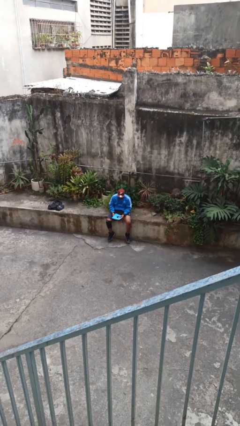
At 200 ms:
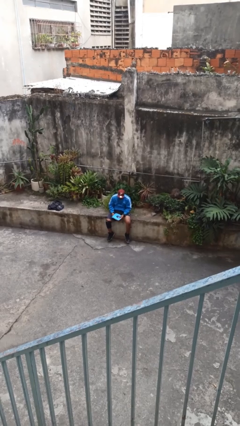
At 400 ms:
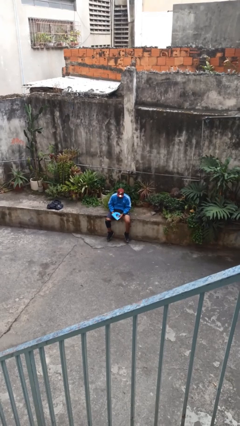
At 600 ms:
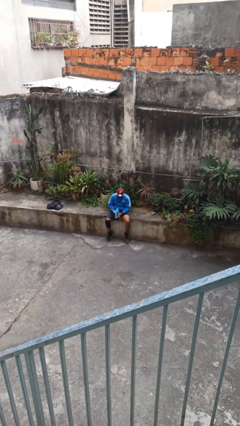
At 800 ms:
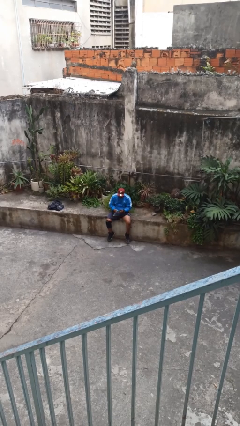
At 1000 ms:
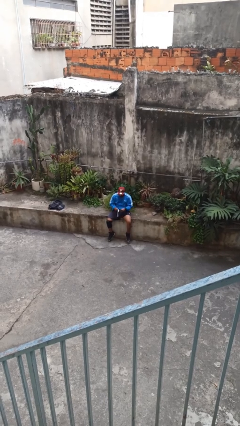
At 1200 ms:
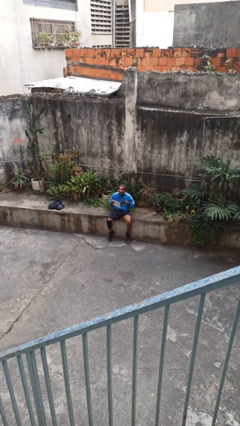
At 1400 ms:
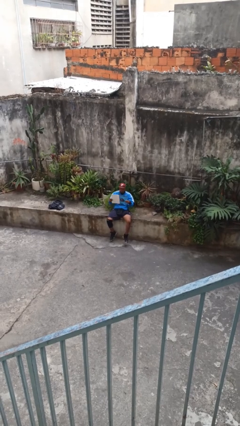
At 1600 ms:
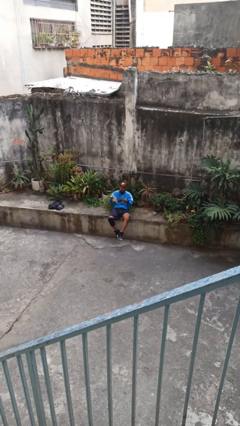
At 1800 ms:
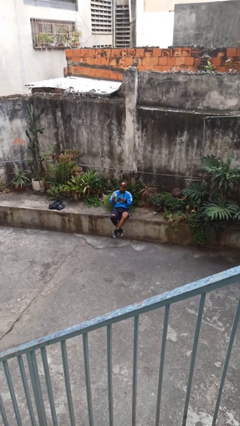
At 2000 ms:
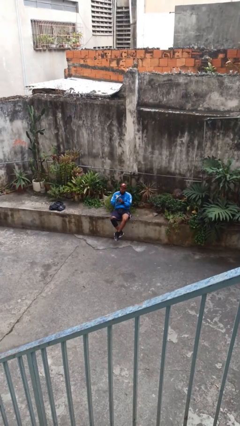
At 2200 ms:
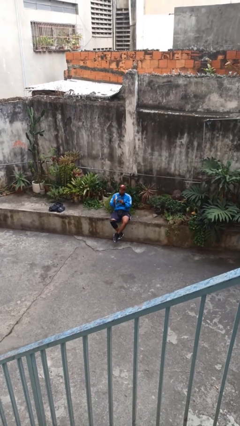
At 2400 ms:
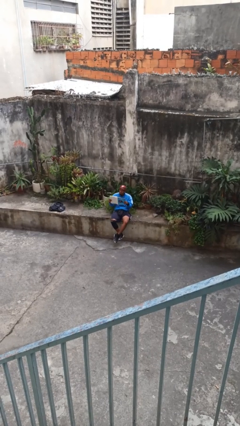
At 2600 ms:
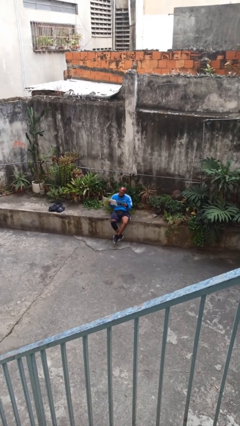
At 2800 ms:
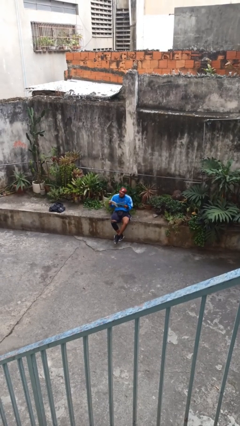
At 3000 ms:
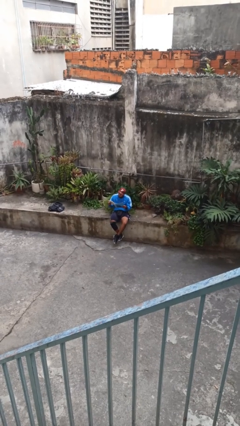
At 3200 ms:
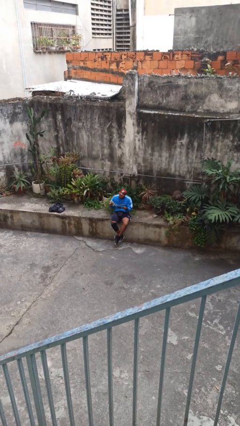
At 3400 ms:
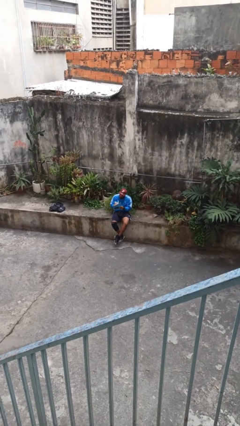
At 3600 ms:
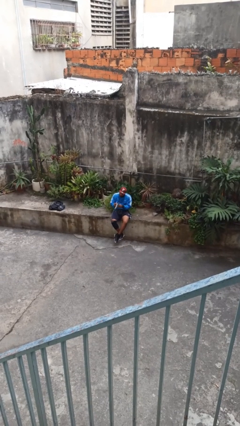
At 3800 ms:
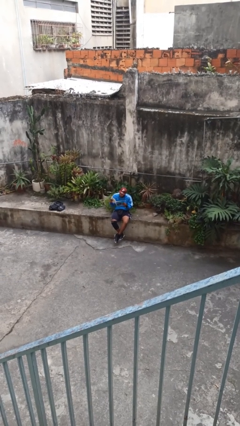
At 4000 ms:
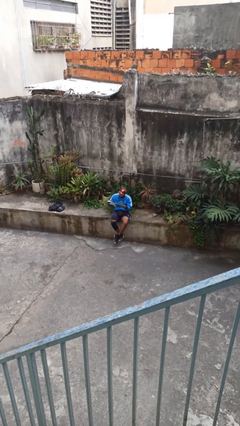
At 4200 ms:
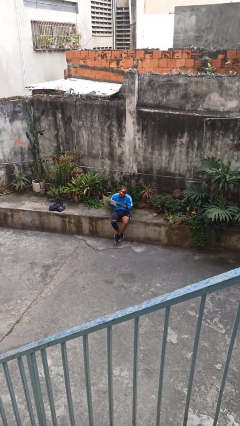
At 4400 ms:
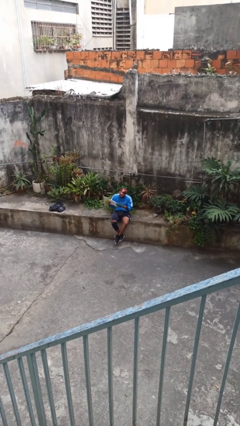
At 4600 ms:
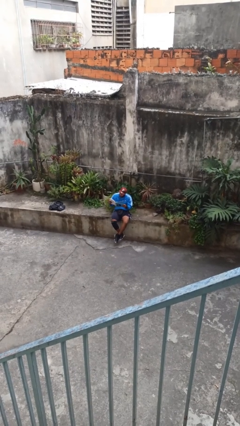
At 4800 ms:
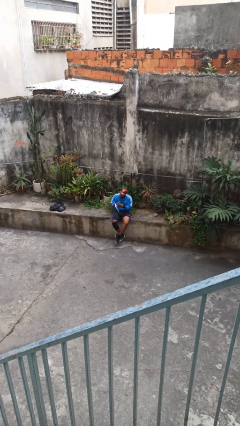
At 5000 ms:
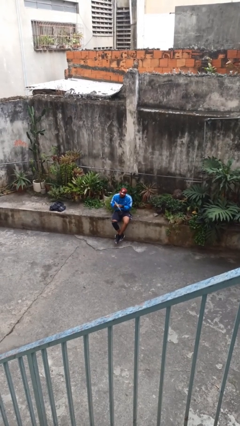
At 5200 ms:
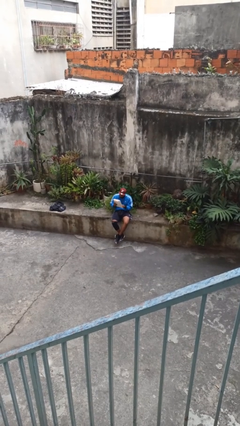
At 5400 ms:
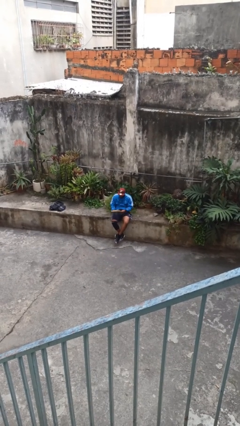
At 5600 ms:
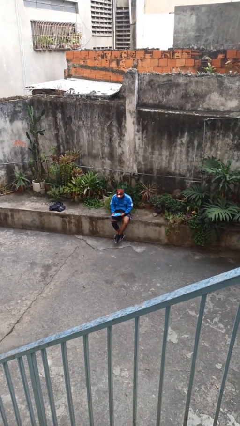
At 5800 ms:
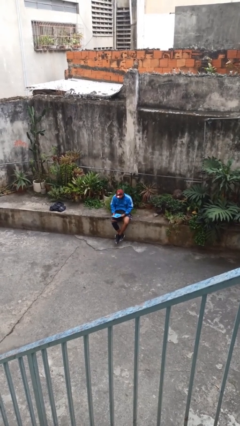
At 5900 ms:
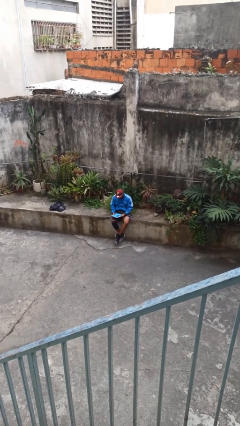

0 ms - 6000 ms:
person reads document

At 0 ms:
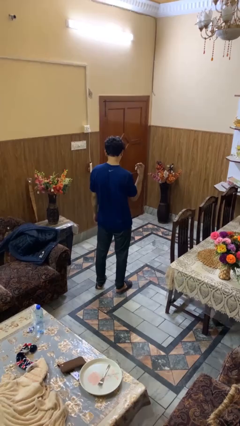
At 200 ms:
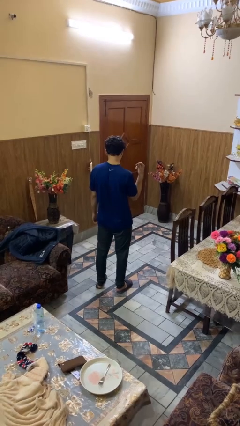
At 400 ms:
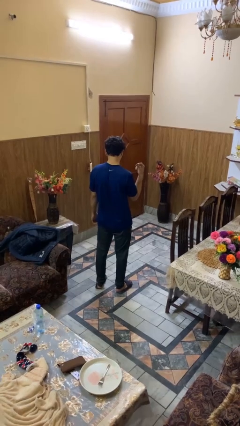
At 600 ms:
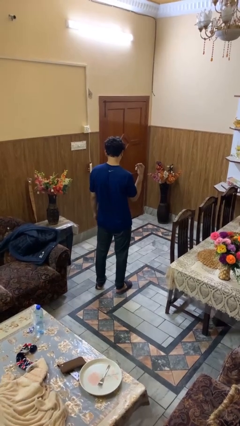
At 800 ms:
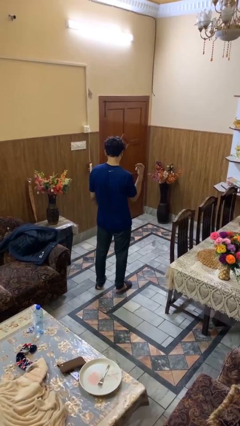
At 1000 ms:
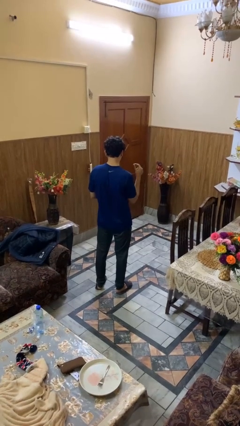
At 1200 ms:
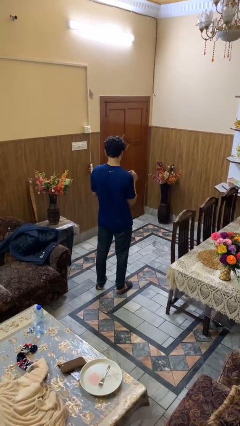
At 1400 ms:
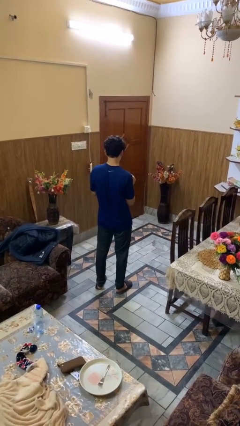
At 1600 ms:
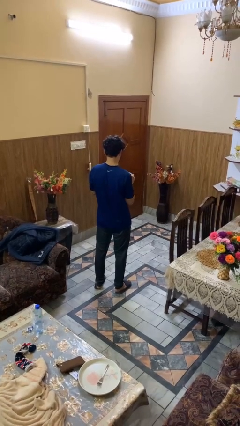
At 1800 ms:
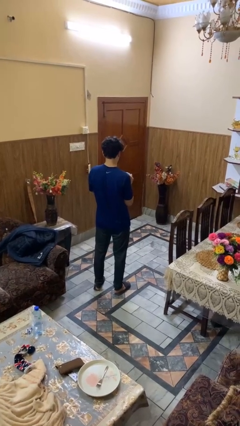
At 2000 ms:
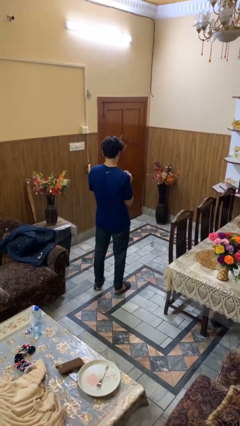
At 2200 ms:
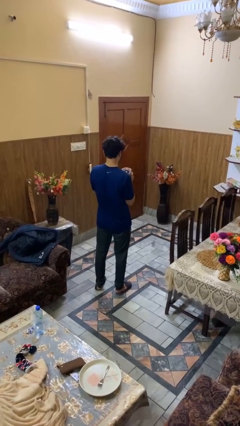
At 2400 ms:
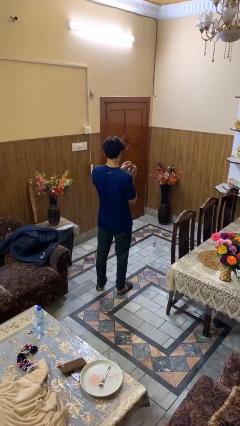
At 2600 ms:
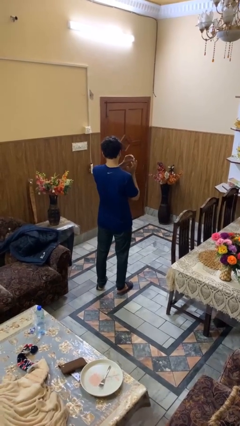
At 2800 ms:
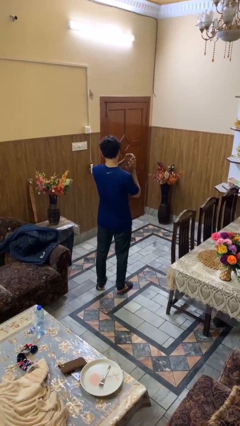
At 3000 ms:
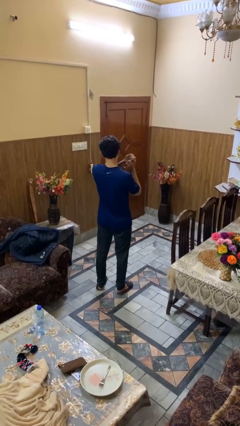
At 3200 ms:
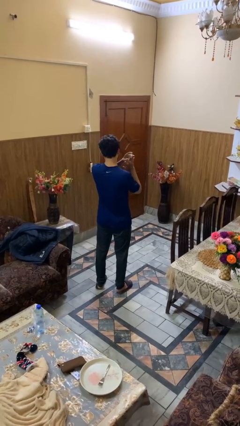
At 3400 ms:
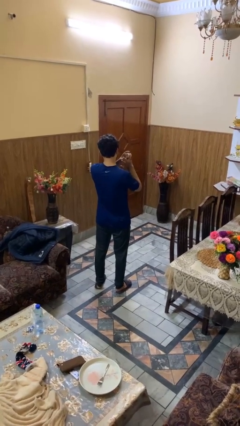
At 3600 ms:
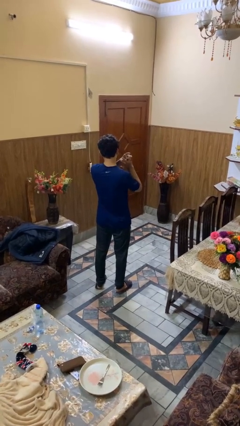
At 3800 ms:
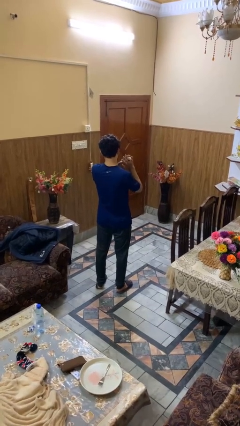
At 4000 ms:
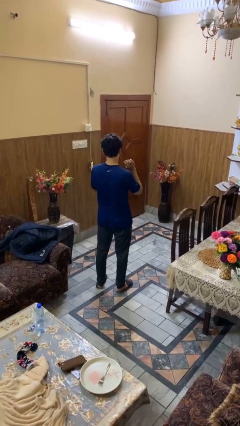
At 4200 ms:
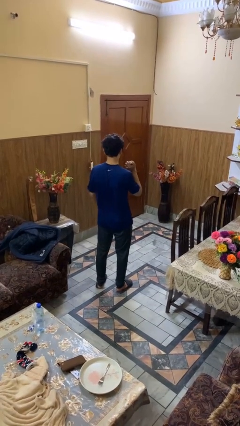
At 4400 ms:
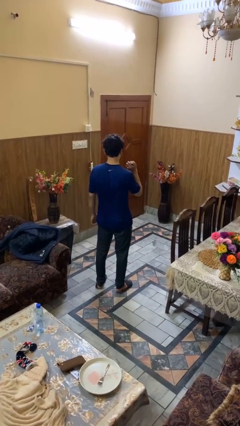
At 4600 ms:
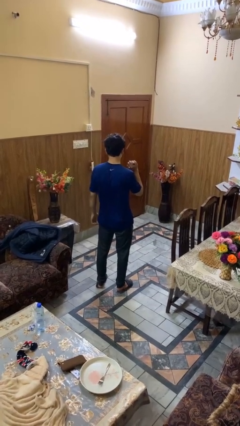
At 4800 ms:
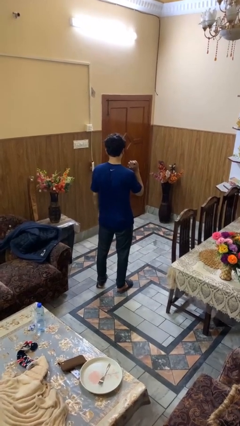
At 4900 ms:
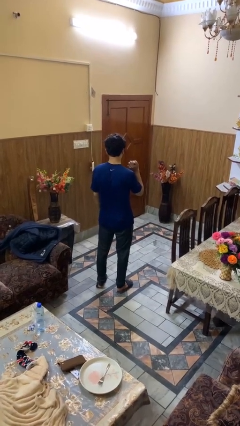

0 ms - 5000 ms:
person puts on ring

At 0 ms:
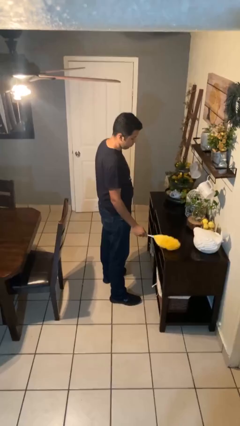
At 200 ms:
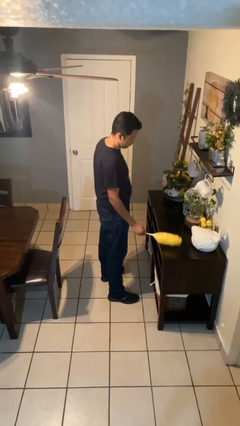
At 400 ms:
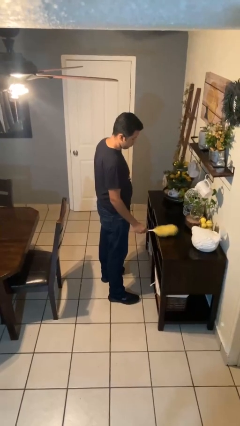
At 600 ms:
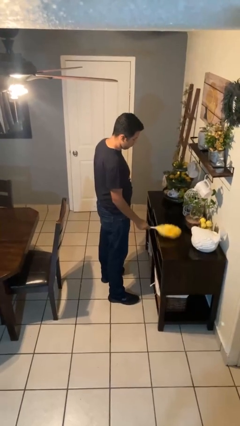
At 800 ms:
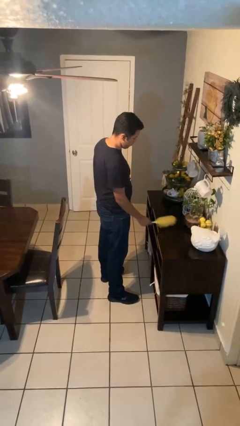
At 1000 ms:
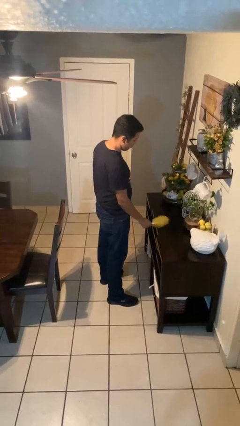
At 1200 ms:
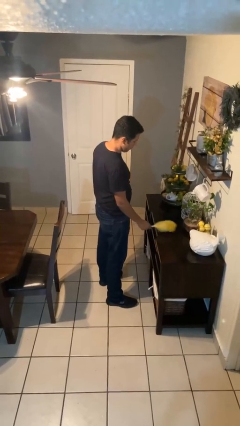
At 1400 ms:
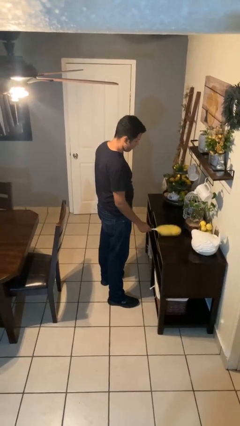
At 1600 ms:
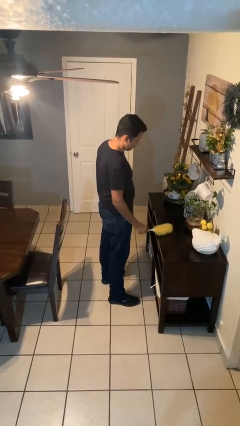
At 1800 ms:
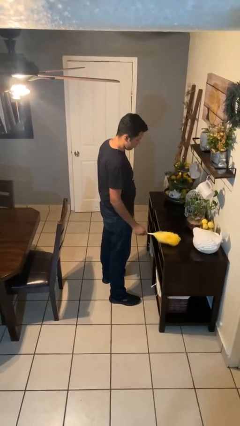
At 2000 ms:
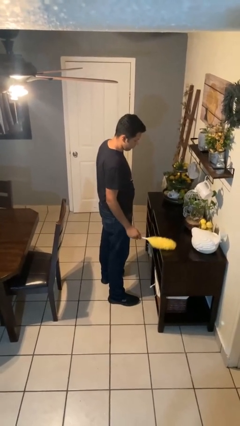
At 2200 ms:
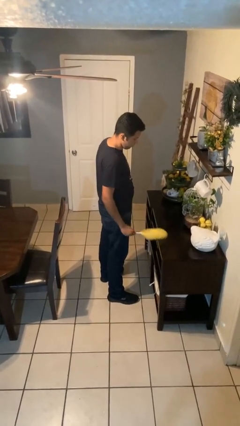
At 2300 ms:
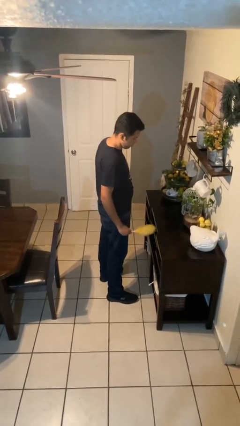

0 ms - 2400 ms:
person dusts furniture

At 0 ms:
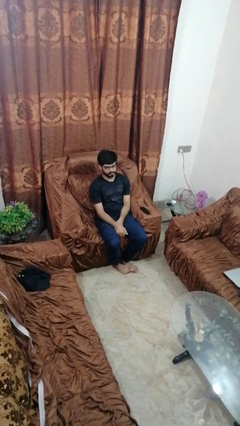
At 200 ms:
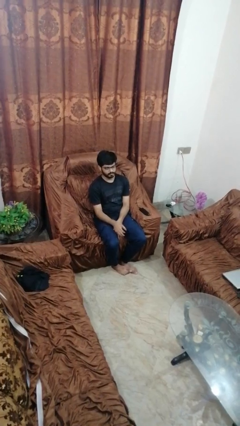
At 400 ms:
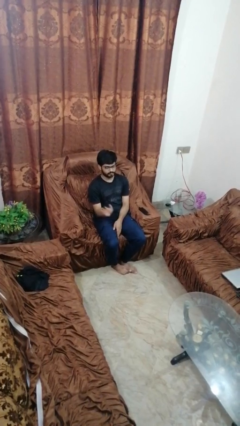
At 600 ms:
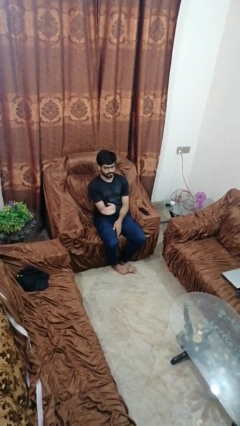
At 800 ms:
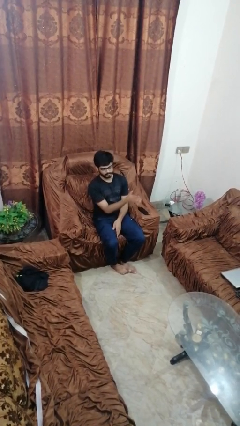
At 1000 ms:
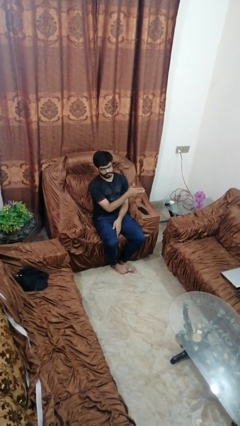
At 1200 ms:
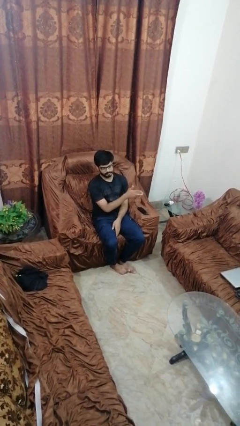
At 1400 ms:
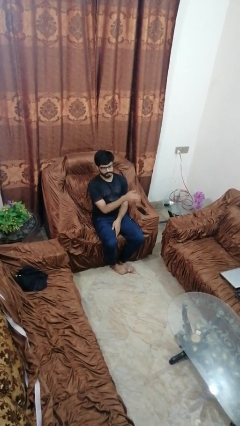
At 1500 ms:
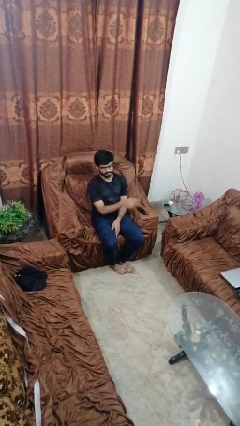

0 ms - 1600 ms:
person gestures swipe left

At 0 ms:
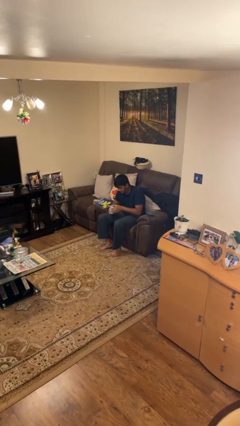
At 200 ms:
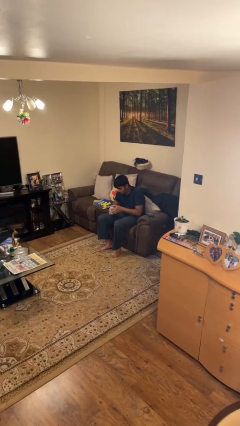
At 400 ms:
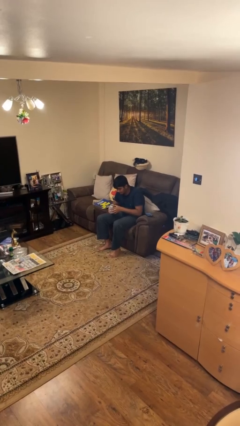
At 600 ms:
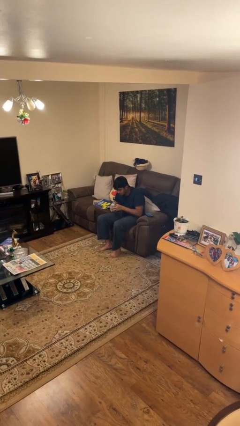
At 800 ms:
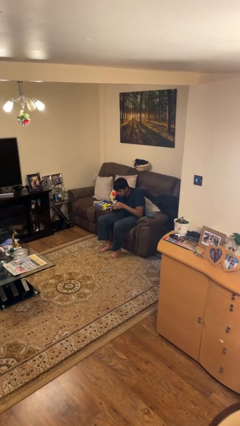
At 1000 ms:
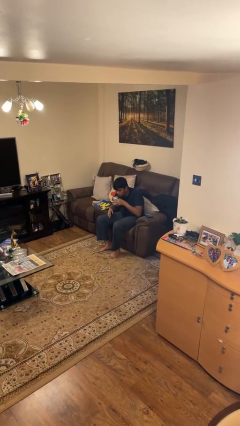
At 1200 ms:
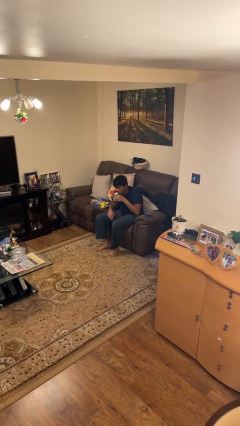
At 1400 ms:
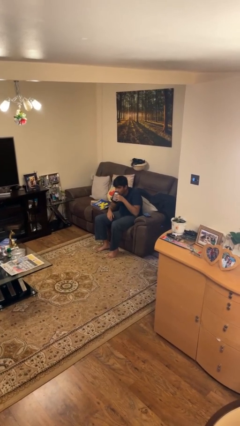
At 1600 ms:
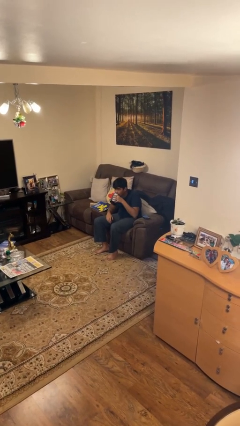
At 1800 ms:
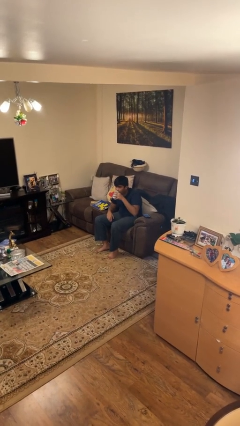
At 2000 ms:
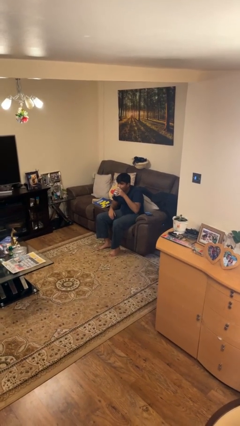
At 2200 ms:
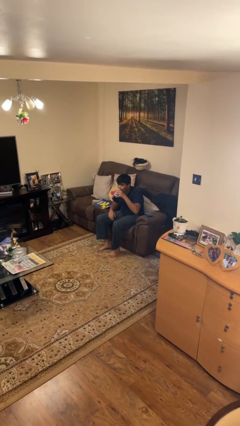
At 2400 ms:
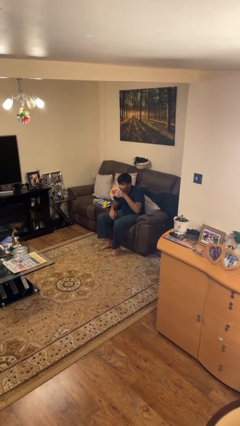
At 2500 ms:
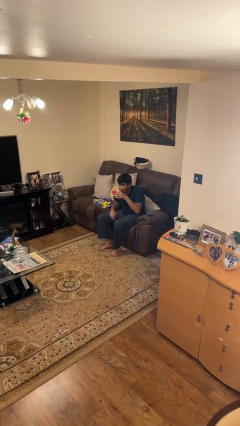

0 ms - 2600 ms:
person drinks from beverage can
